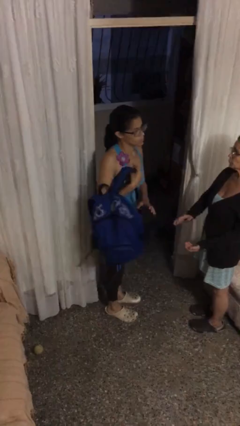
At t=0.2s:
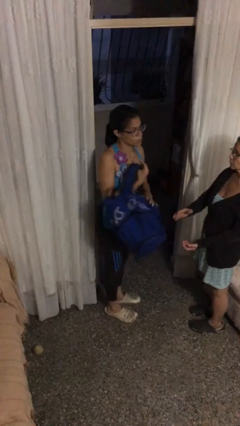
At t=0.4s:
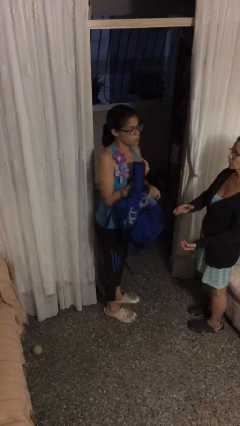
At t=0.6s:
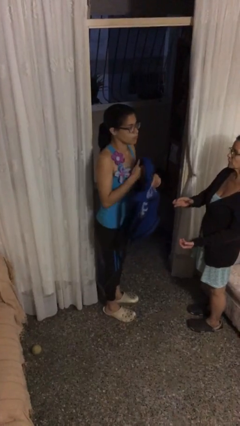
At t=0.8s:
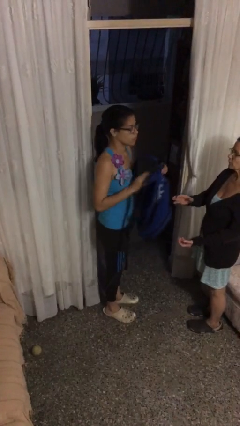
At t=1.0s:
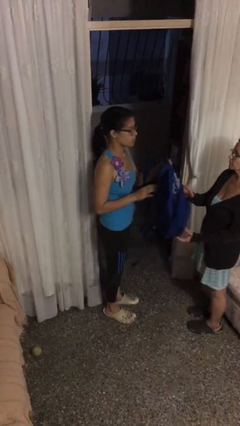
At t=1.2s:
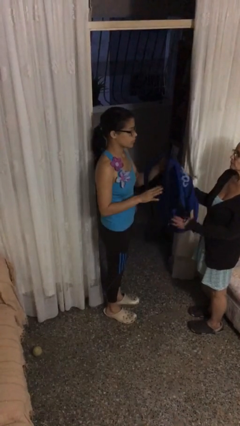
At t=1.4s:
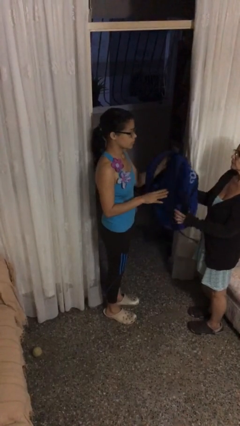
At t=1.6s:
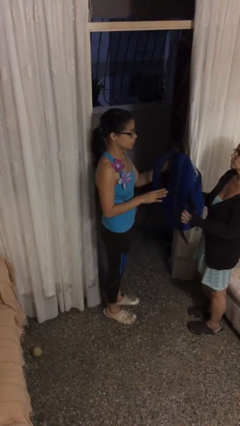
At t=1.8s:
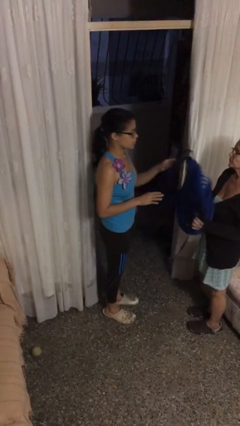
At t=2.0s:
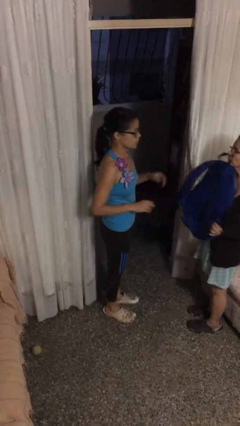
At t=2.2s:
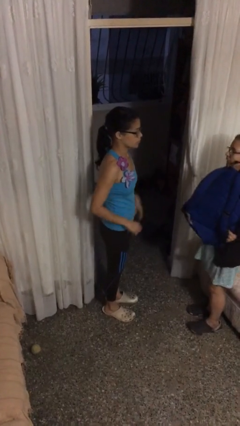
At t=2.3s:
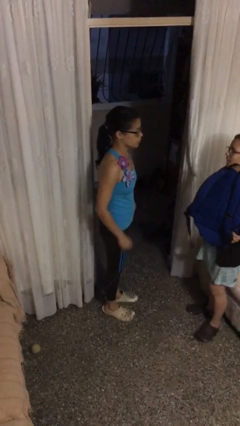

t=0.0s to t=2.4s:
person transfers object to person

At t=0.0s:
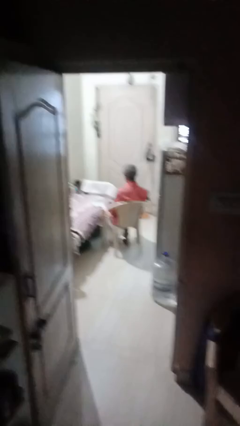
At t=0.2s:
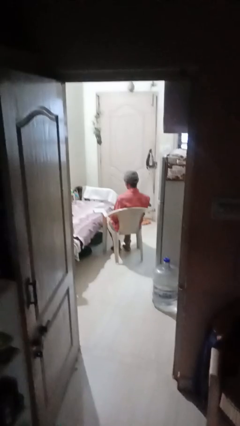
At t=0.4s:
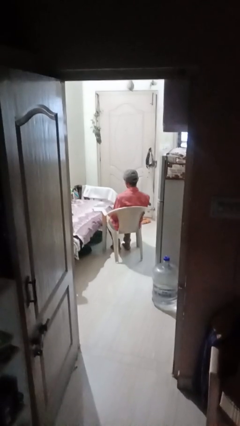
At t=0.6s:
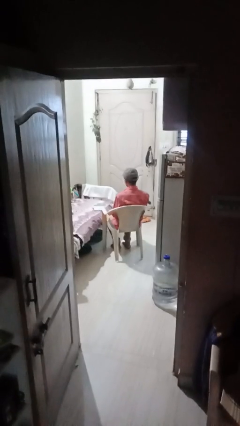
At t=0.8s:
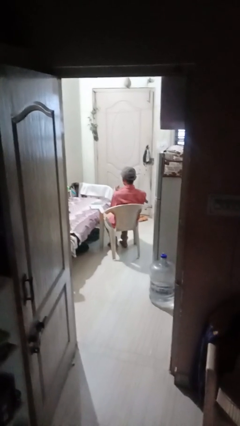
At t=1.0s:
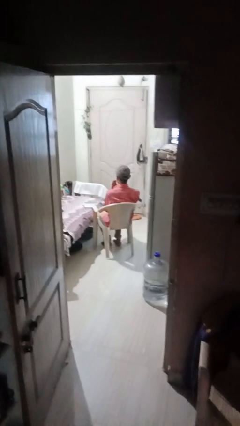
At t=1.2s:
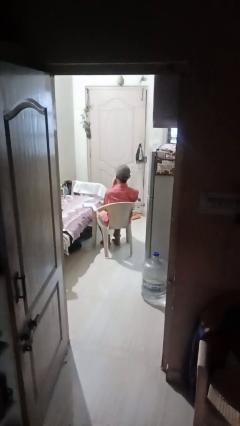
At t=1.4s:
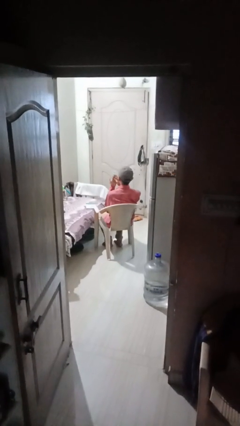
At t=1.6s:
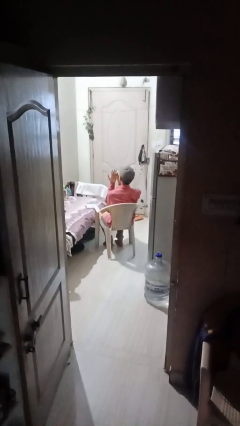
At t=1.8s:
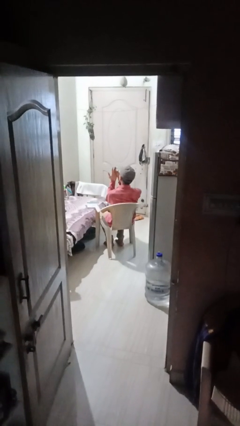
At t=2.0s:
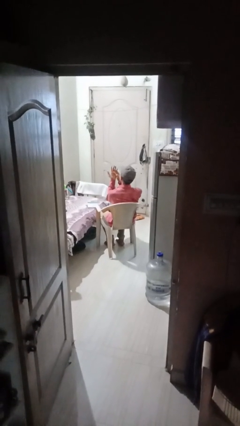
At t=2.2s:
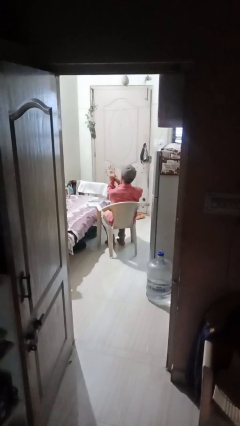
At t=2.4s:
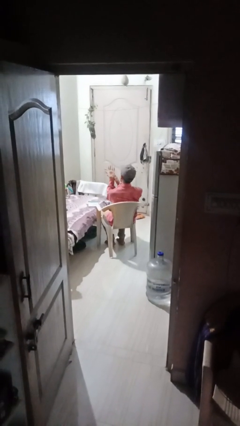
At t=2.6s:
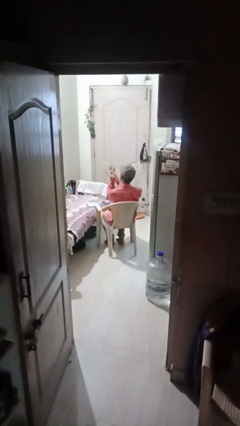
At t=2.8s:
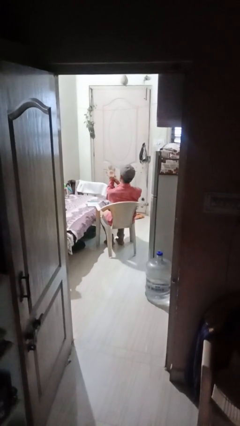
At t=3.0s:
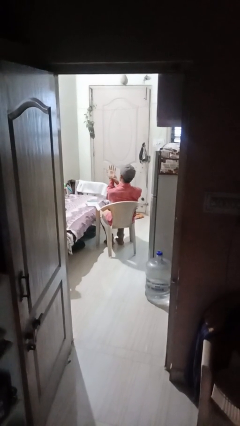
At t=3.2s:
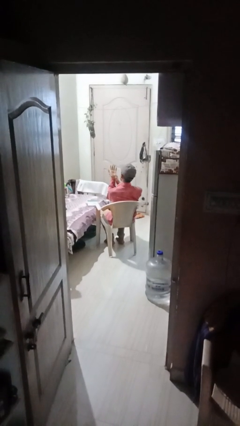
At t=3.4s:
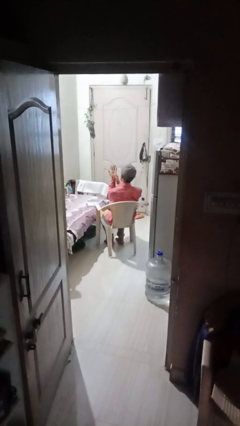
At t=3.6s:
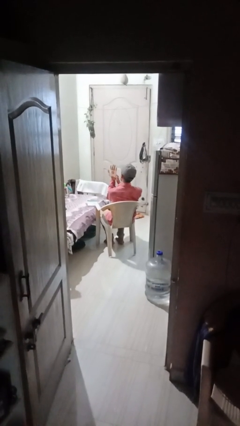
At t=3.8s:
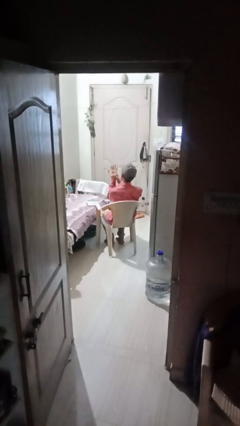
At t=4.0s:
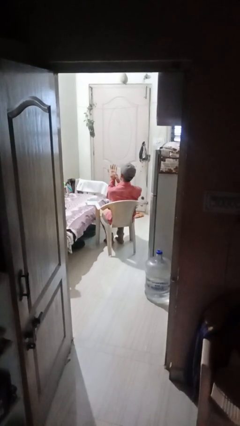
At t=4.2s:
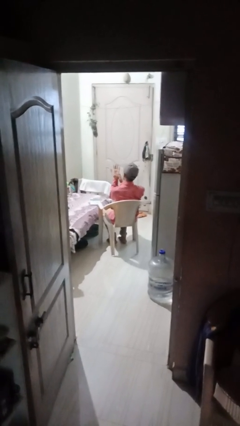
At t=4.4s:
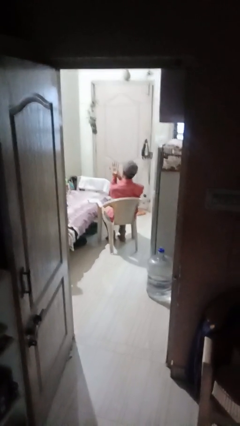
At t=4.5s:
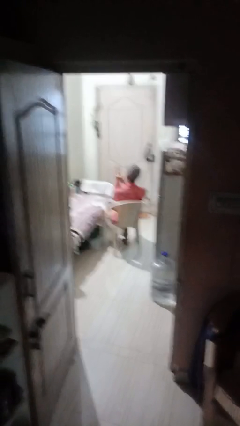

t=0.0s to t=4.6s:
person looks at hands in lap

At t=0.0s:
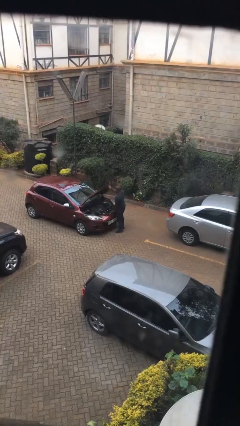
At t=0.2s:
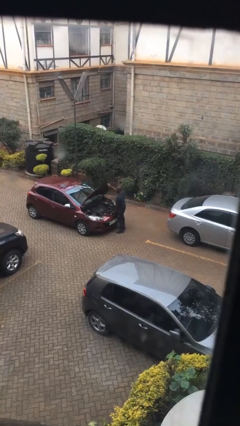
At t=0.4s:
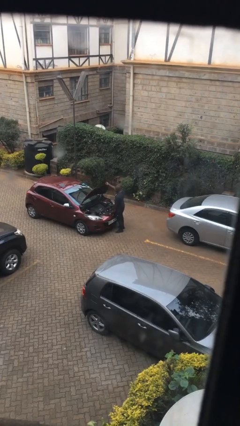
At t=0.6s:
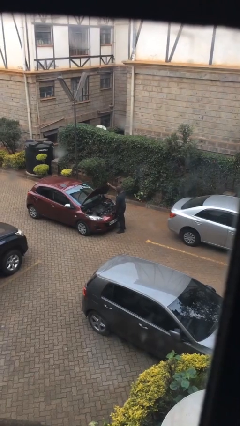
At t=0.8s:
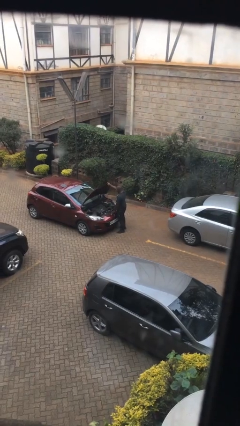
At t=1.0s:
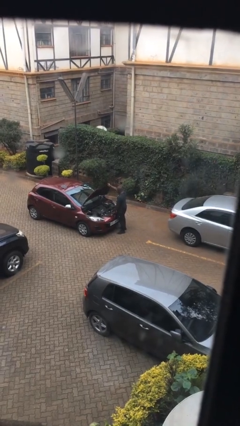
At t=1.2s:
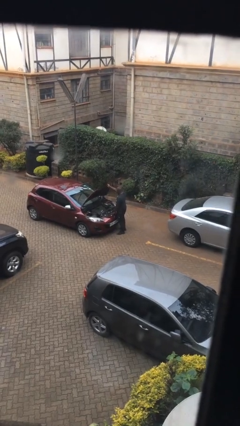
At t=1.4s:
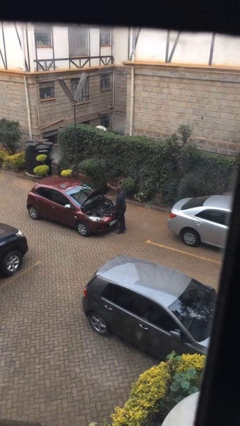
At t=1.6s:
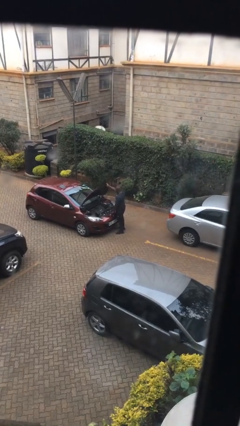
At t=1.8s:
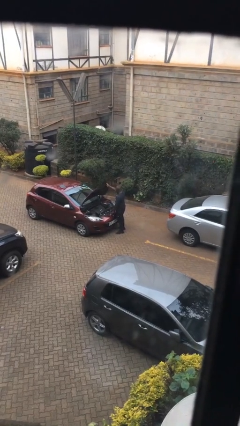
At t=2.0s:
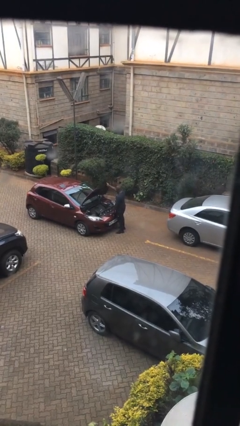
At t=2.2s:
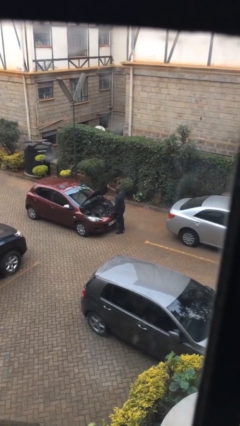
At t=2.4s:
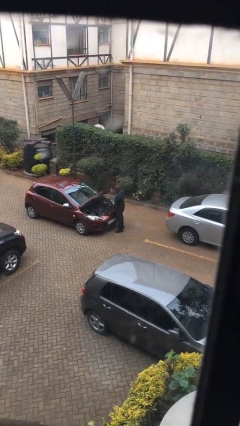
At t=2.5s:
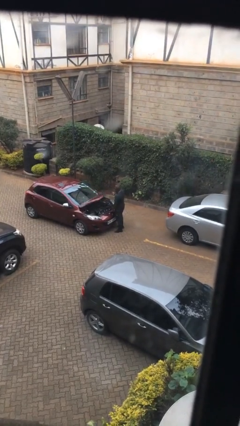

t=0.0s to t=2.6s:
person opens car hood

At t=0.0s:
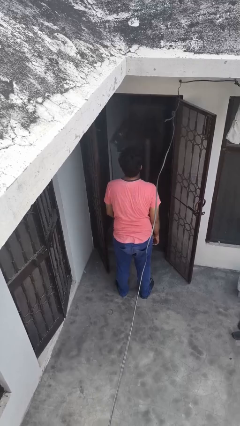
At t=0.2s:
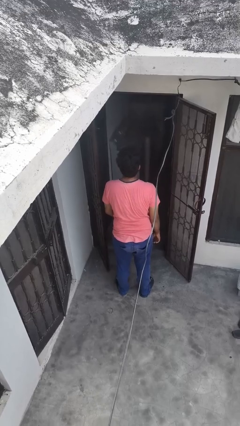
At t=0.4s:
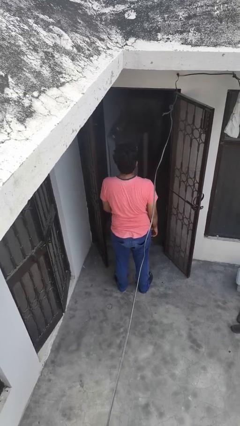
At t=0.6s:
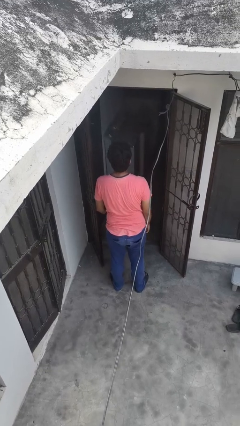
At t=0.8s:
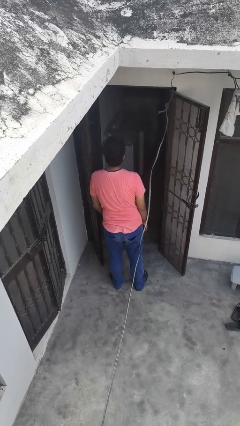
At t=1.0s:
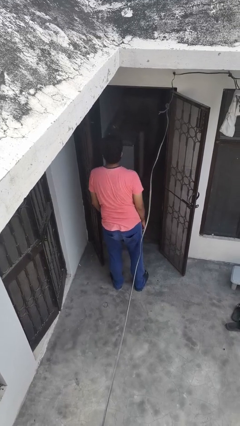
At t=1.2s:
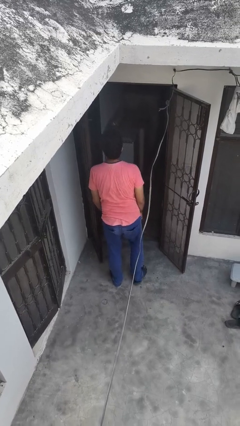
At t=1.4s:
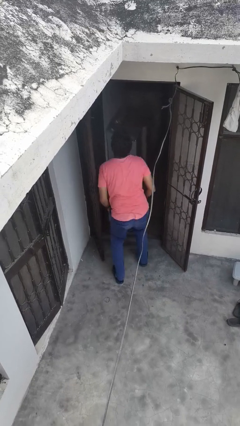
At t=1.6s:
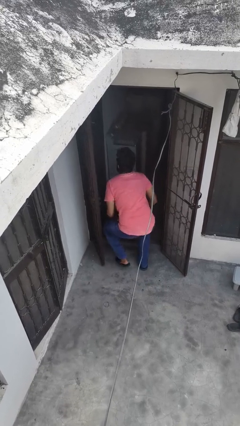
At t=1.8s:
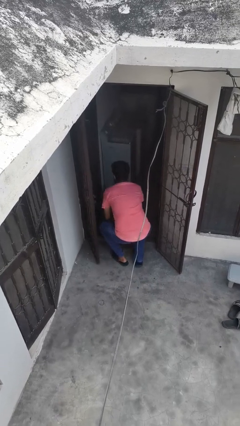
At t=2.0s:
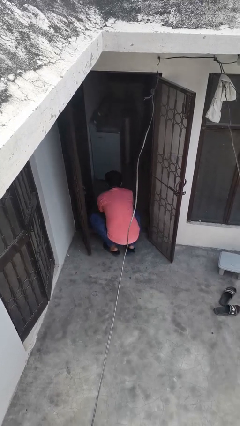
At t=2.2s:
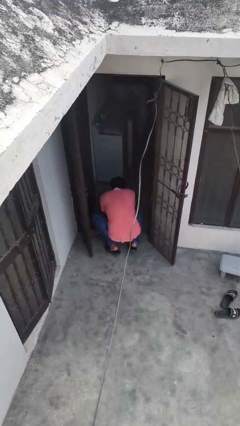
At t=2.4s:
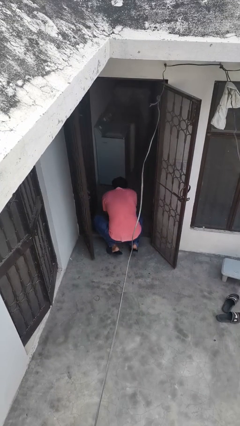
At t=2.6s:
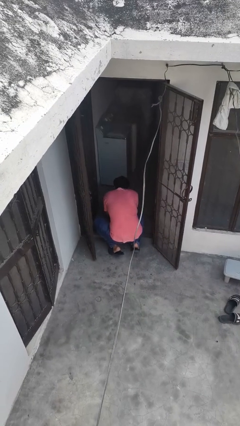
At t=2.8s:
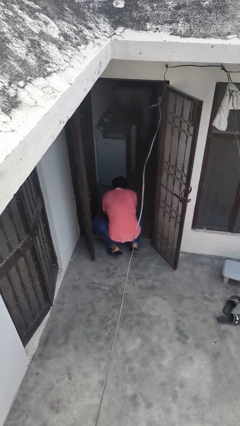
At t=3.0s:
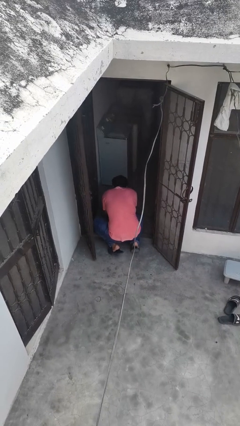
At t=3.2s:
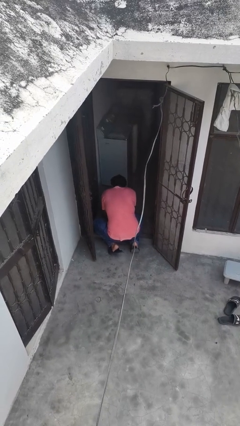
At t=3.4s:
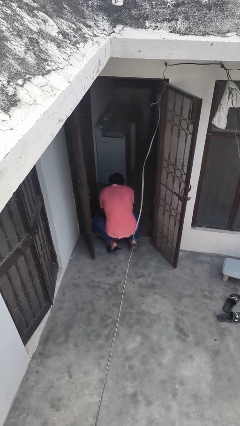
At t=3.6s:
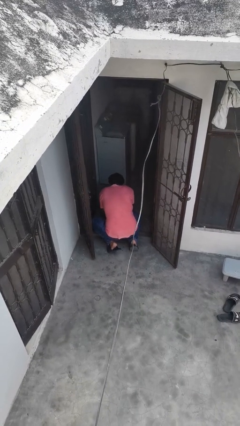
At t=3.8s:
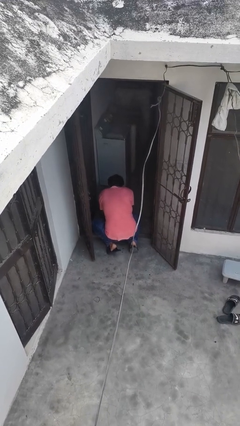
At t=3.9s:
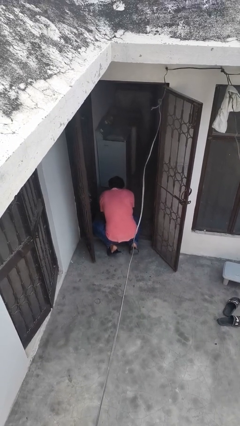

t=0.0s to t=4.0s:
person bumps into wall

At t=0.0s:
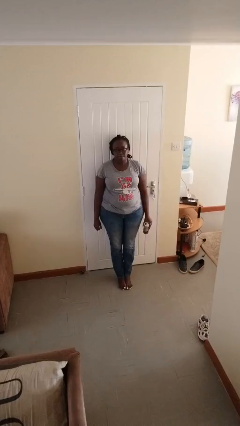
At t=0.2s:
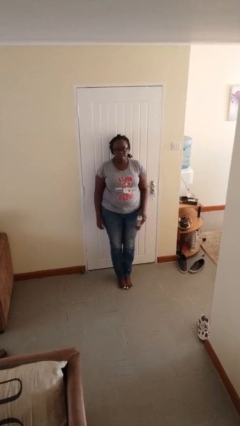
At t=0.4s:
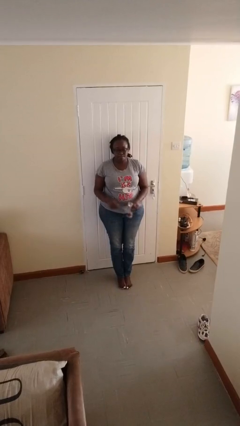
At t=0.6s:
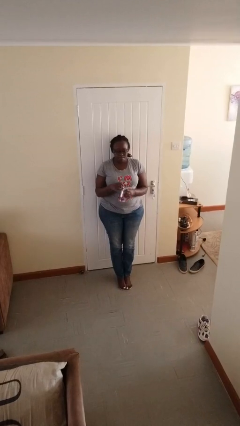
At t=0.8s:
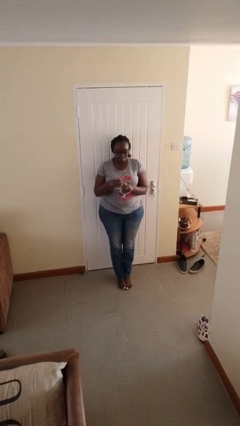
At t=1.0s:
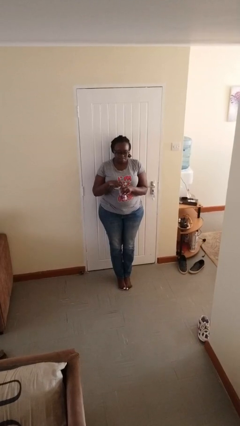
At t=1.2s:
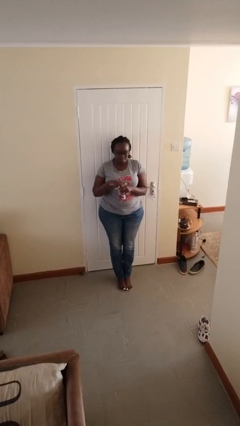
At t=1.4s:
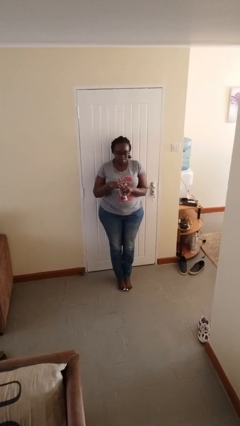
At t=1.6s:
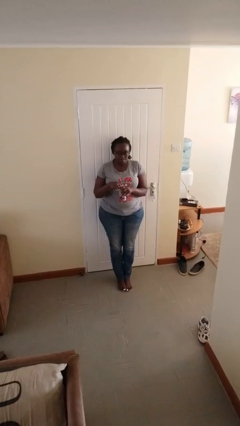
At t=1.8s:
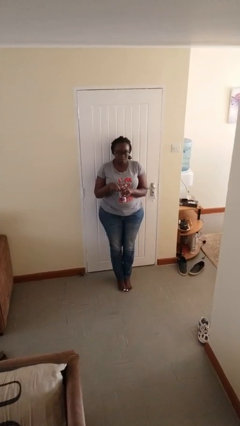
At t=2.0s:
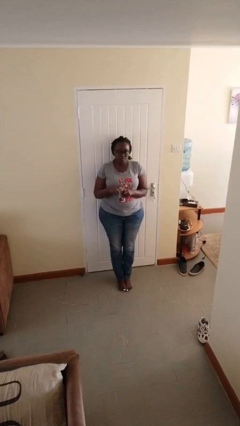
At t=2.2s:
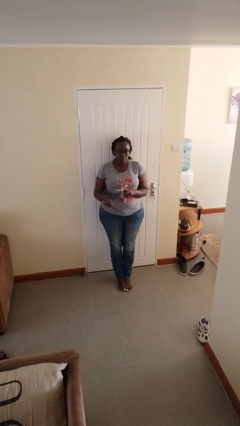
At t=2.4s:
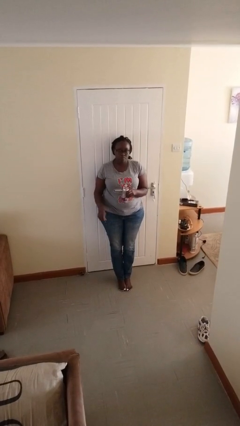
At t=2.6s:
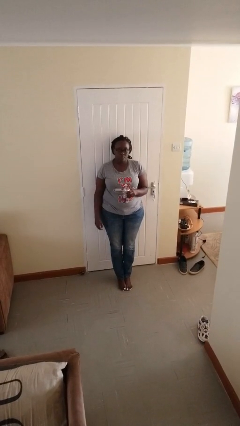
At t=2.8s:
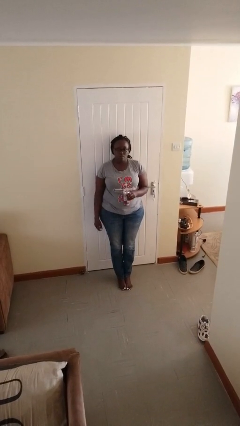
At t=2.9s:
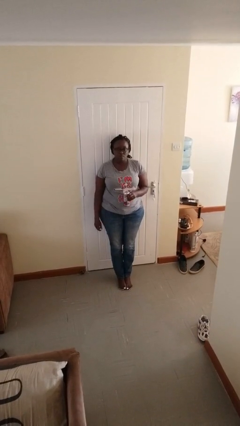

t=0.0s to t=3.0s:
person opens beverage can

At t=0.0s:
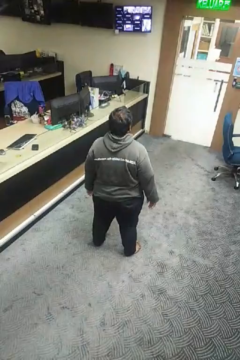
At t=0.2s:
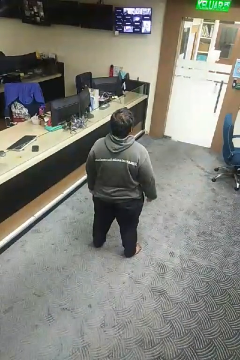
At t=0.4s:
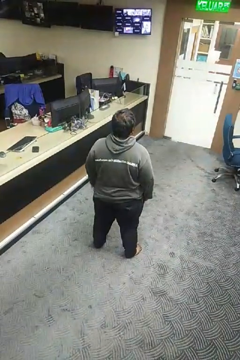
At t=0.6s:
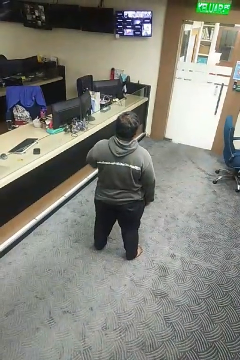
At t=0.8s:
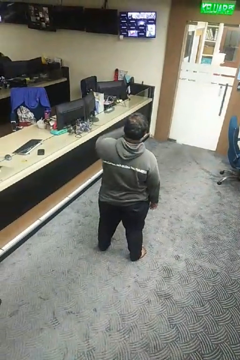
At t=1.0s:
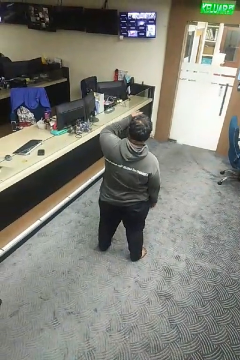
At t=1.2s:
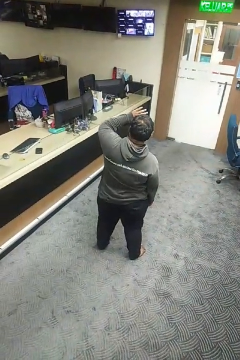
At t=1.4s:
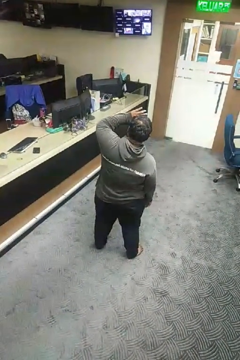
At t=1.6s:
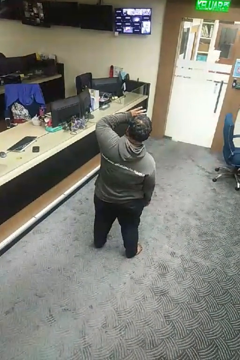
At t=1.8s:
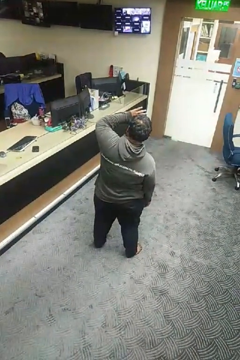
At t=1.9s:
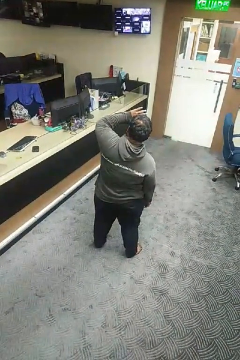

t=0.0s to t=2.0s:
person shades eyes
